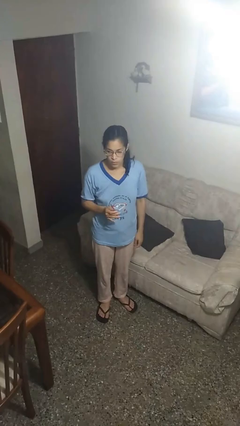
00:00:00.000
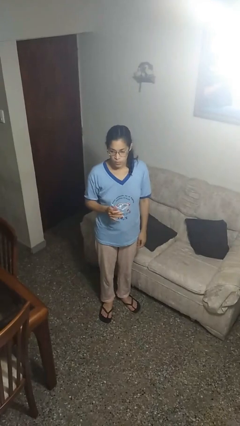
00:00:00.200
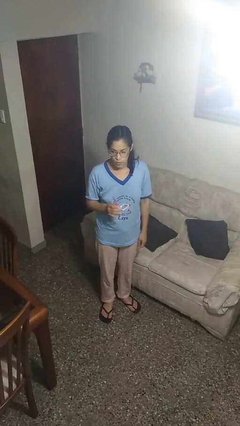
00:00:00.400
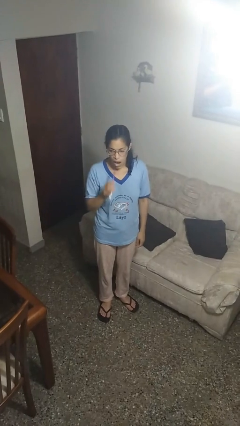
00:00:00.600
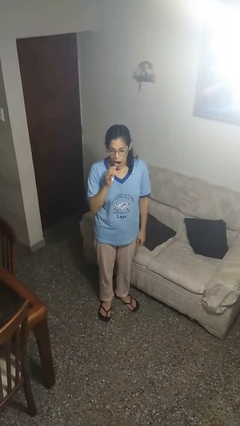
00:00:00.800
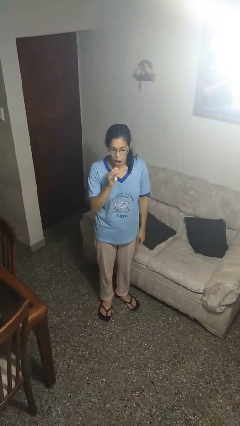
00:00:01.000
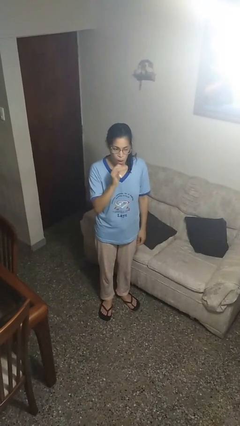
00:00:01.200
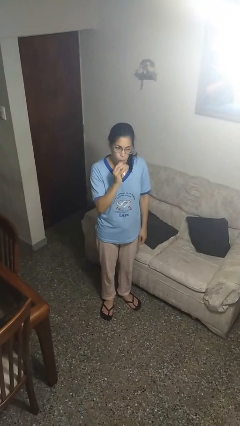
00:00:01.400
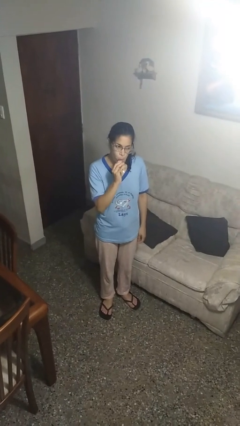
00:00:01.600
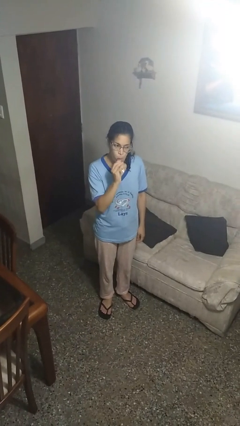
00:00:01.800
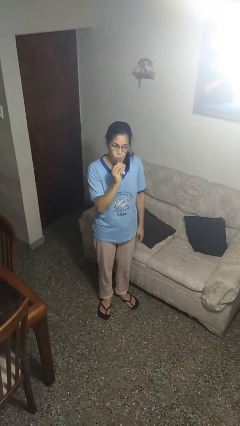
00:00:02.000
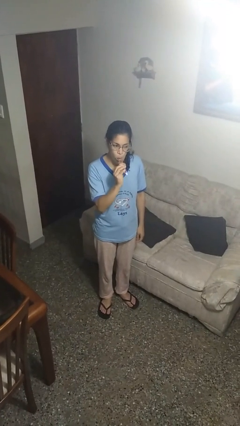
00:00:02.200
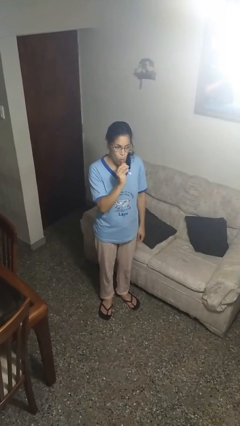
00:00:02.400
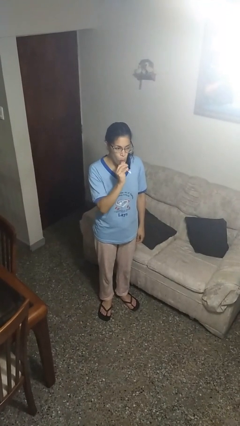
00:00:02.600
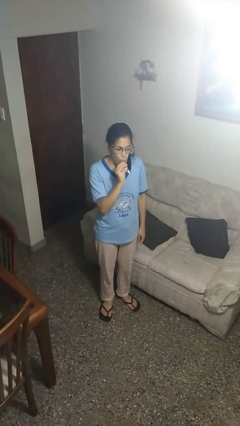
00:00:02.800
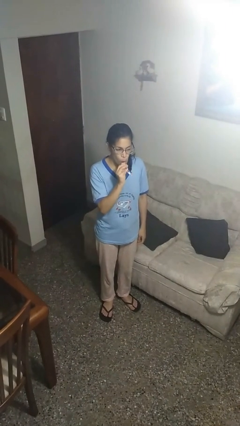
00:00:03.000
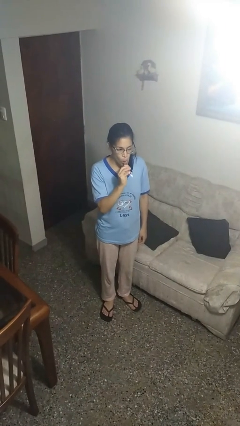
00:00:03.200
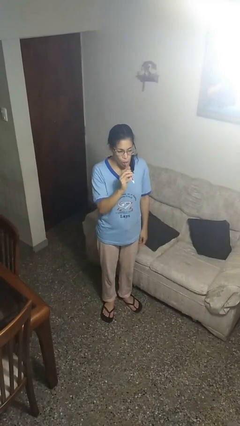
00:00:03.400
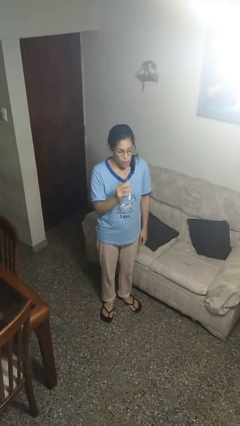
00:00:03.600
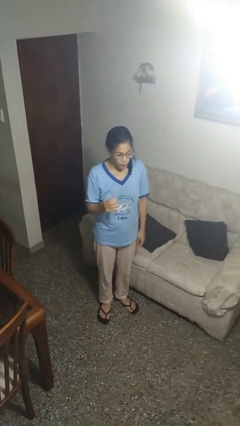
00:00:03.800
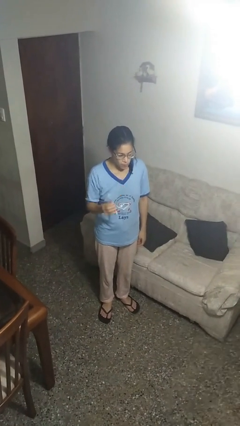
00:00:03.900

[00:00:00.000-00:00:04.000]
person brushes teeth

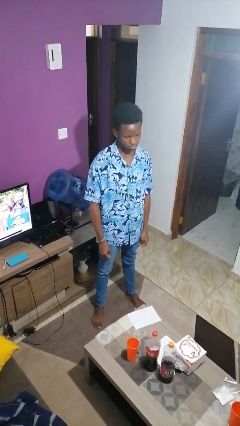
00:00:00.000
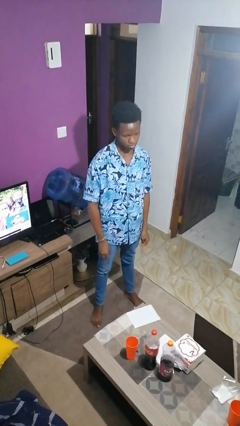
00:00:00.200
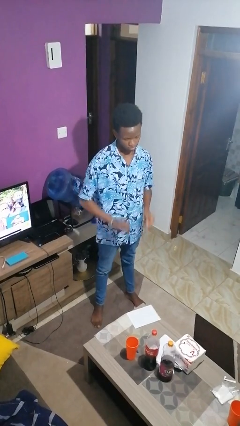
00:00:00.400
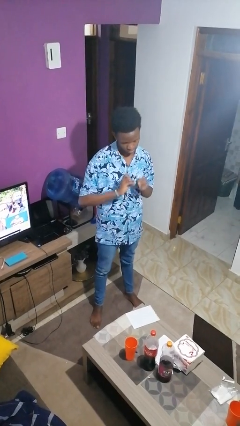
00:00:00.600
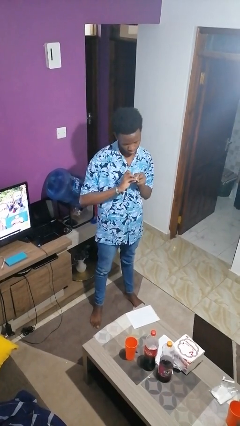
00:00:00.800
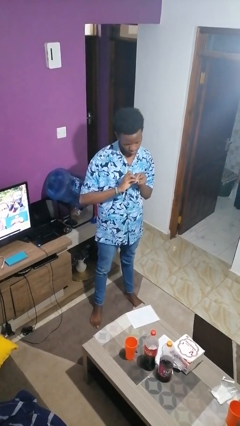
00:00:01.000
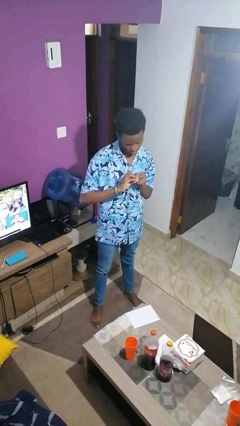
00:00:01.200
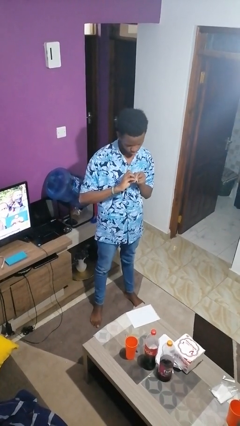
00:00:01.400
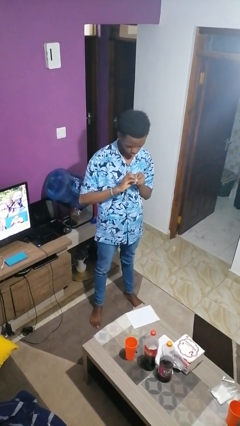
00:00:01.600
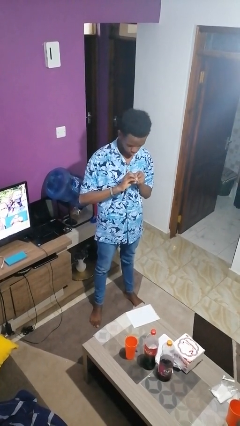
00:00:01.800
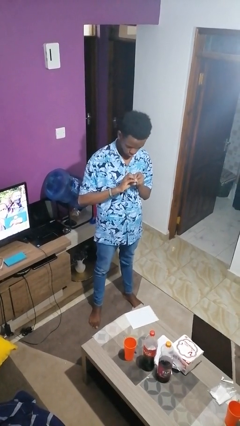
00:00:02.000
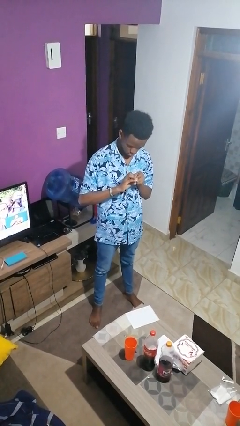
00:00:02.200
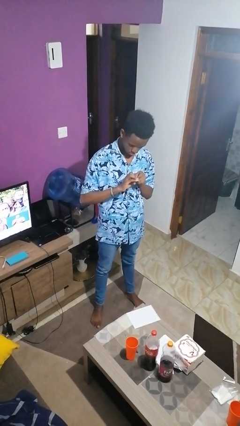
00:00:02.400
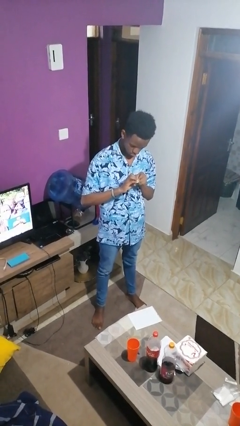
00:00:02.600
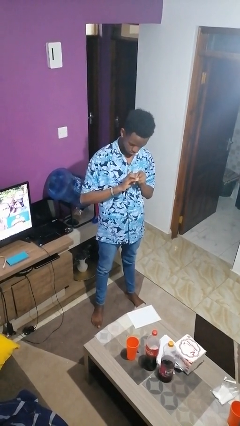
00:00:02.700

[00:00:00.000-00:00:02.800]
person files fingernails

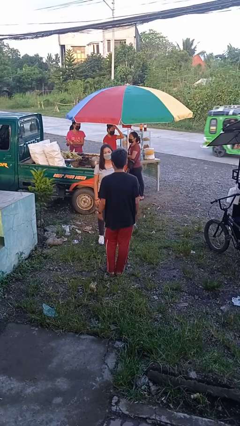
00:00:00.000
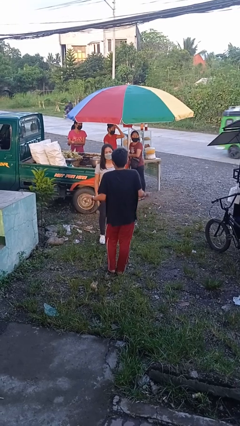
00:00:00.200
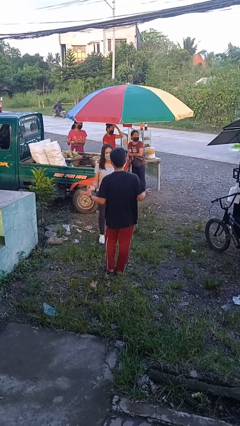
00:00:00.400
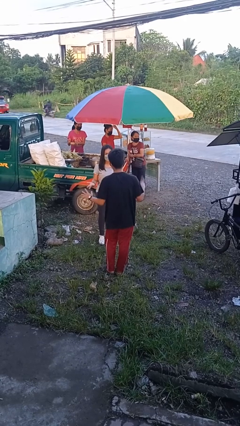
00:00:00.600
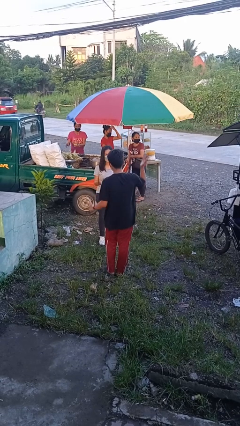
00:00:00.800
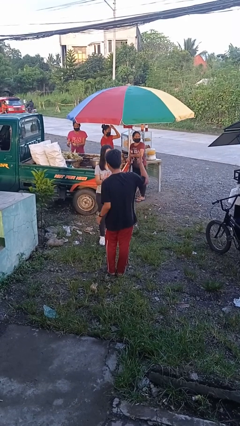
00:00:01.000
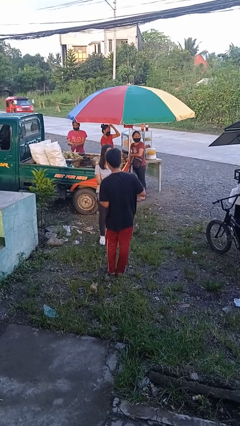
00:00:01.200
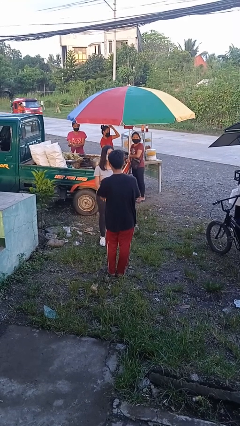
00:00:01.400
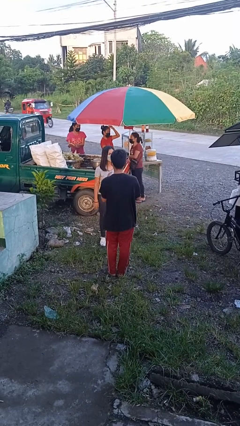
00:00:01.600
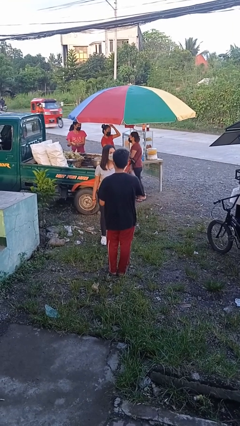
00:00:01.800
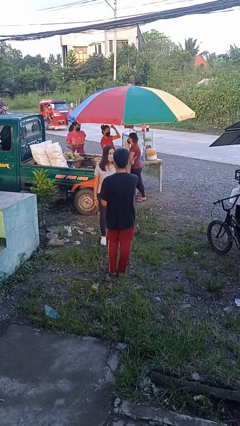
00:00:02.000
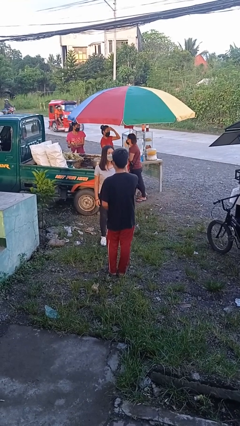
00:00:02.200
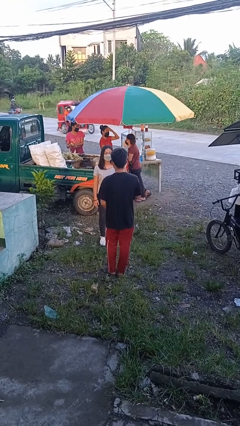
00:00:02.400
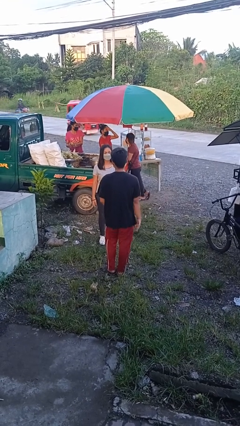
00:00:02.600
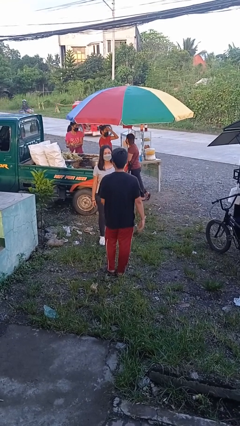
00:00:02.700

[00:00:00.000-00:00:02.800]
person talks to person

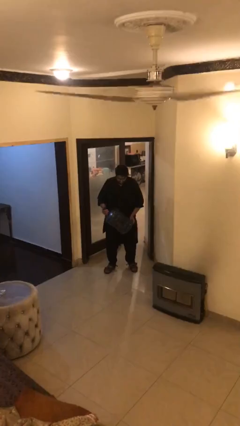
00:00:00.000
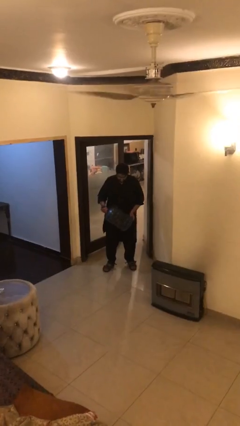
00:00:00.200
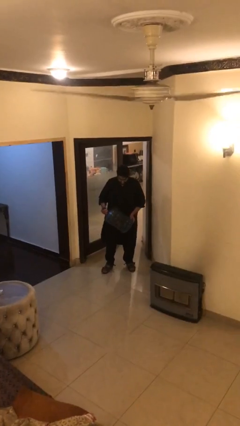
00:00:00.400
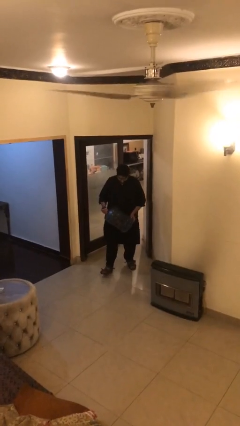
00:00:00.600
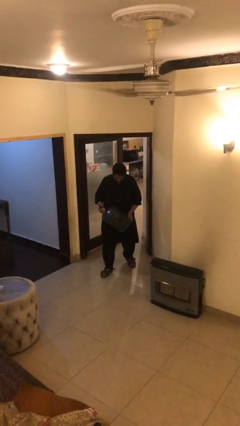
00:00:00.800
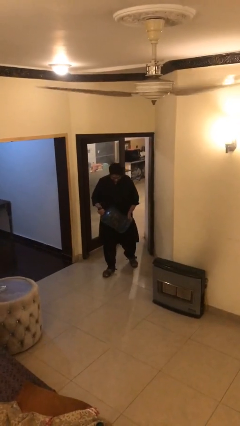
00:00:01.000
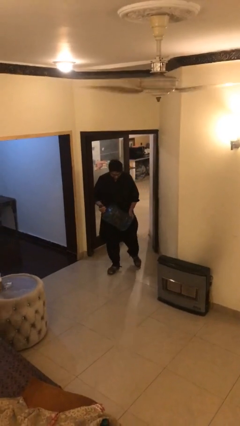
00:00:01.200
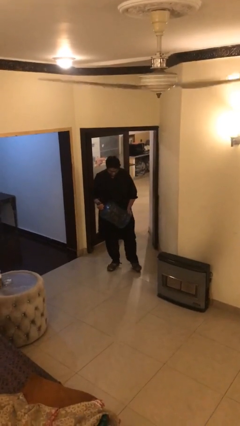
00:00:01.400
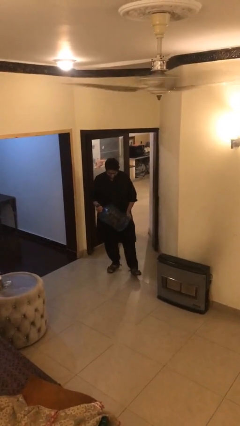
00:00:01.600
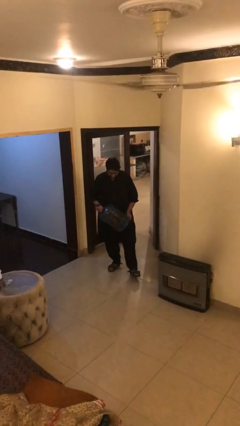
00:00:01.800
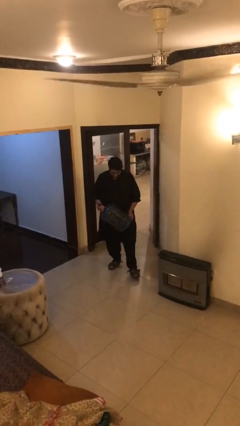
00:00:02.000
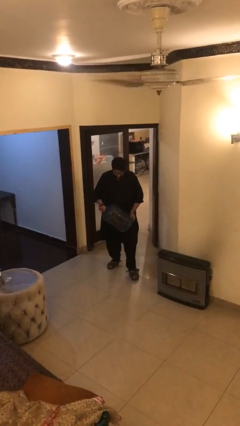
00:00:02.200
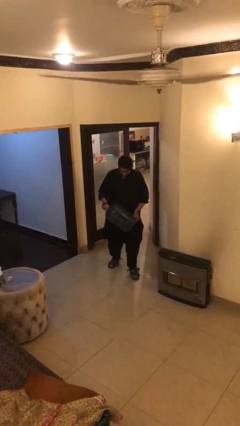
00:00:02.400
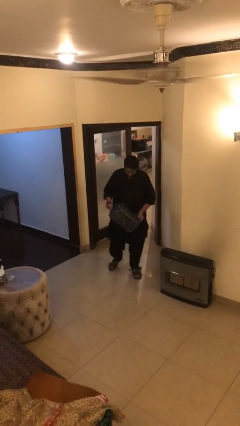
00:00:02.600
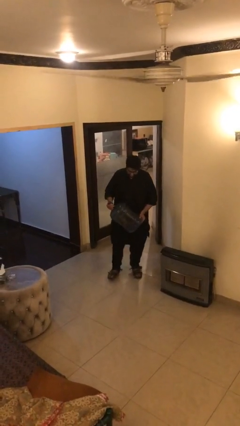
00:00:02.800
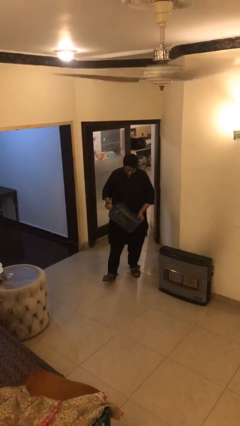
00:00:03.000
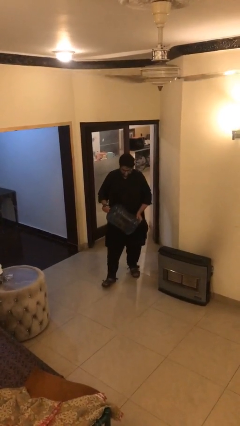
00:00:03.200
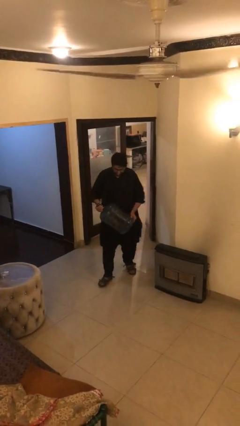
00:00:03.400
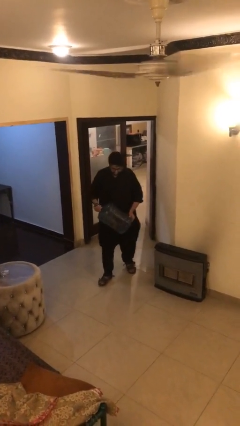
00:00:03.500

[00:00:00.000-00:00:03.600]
person carries heavy object

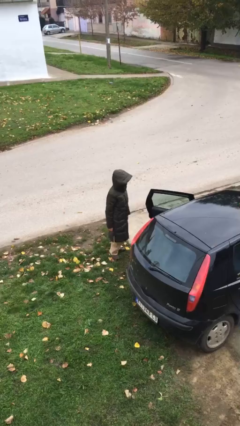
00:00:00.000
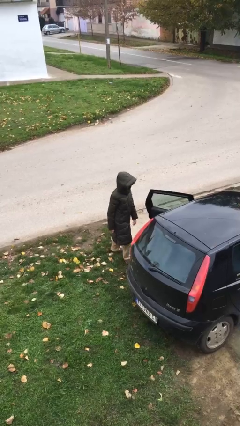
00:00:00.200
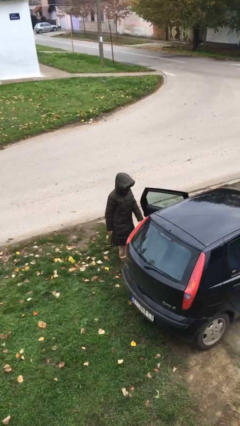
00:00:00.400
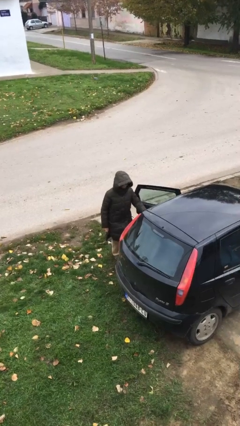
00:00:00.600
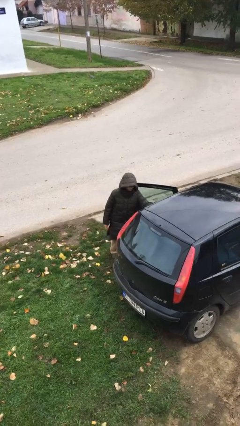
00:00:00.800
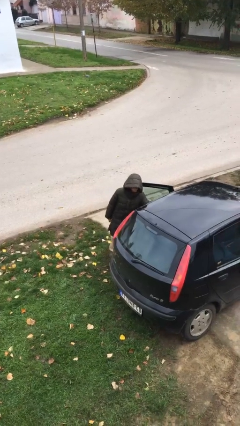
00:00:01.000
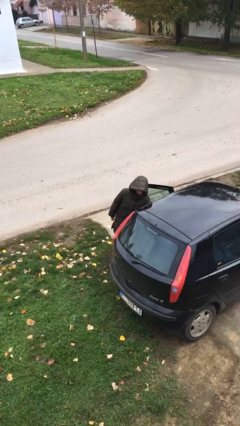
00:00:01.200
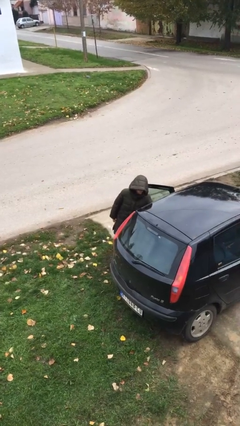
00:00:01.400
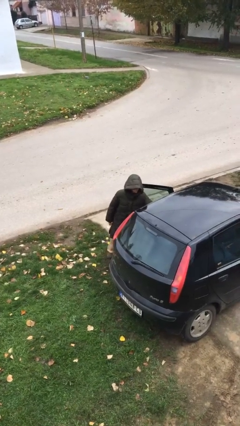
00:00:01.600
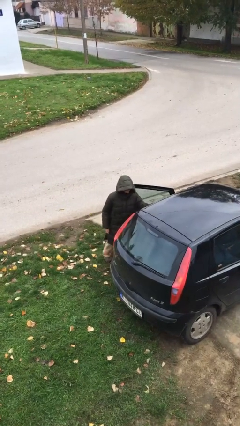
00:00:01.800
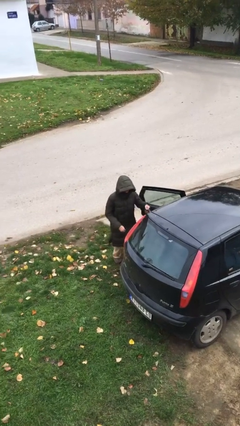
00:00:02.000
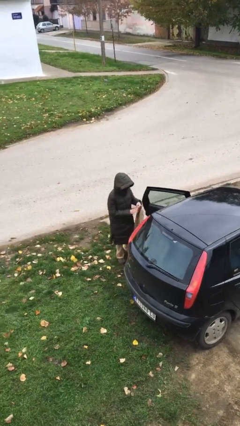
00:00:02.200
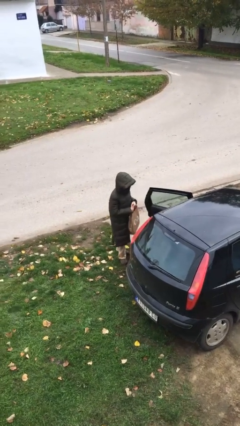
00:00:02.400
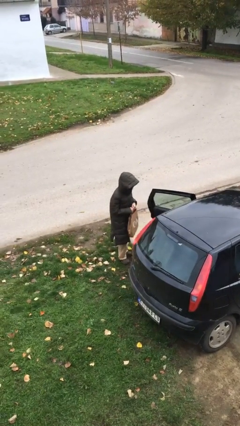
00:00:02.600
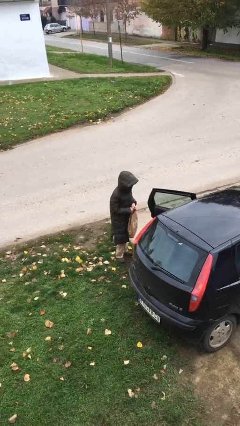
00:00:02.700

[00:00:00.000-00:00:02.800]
person unloads car

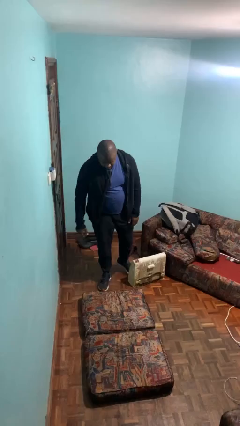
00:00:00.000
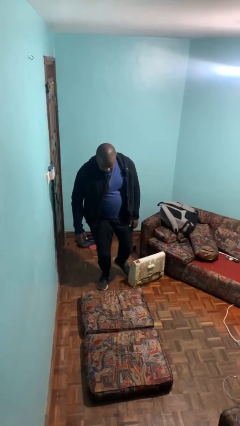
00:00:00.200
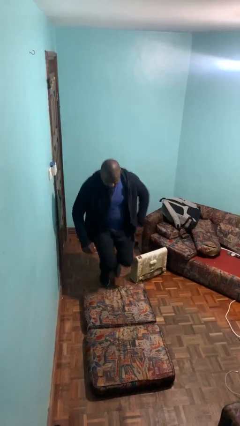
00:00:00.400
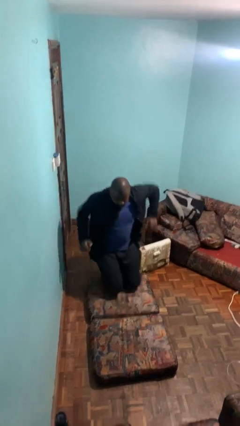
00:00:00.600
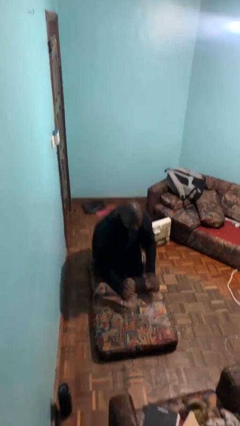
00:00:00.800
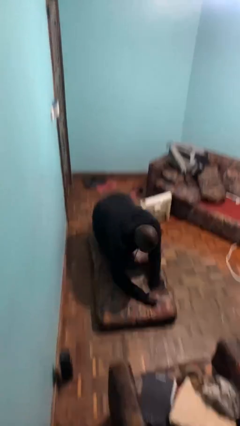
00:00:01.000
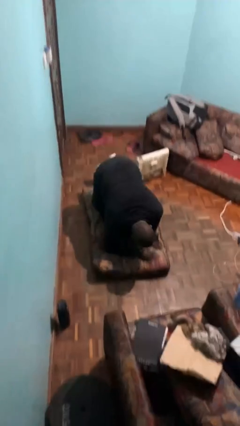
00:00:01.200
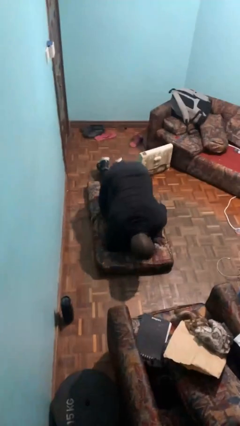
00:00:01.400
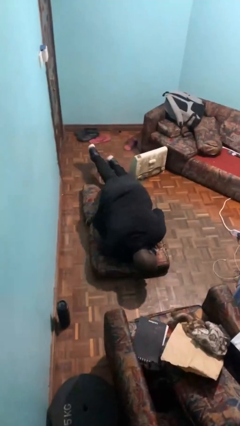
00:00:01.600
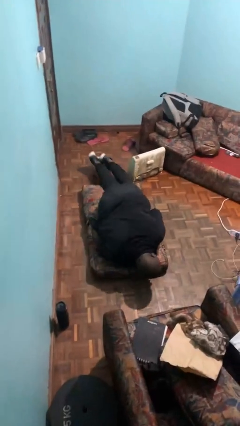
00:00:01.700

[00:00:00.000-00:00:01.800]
person trips on object on floor
